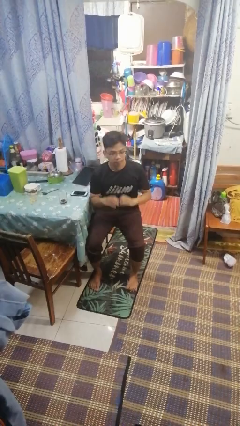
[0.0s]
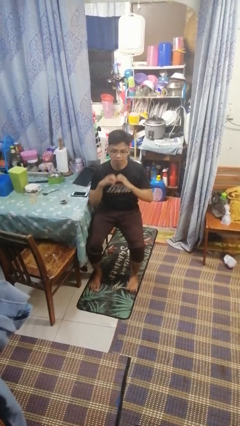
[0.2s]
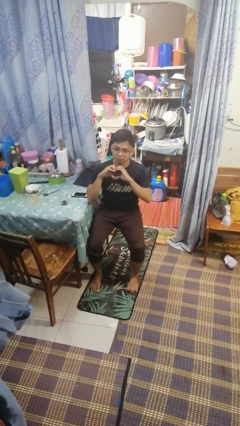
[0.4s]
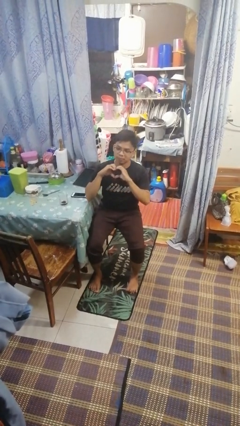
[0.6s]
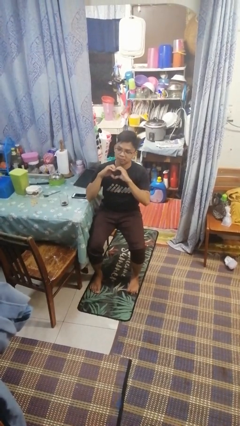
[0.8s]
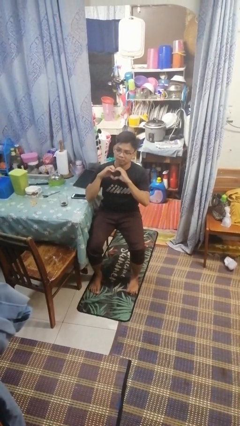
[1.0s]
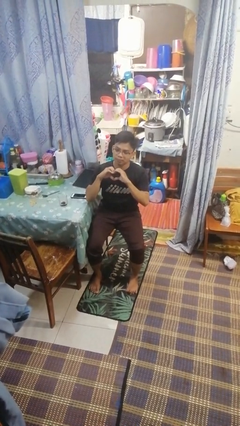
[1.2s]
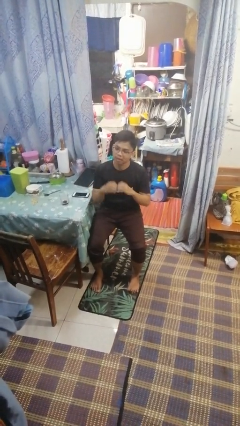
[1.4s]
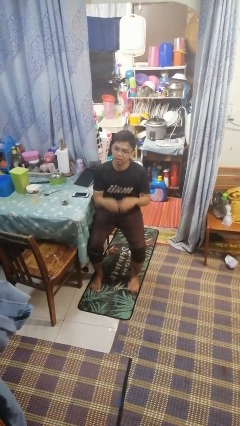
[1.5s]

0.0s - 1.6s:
person gestures heart

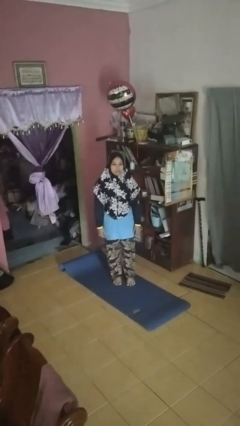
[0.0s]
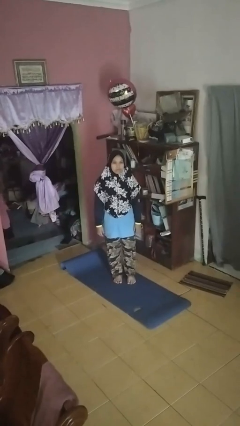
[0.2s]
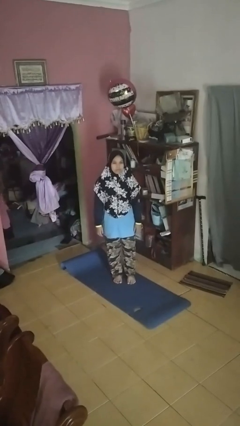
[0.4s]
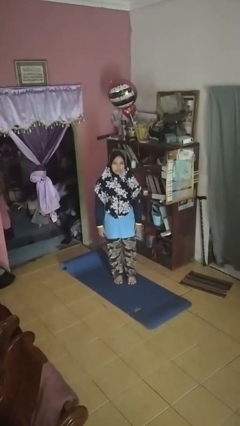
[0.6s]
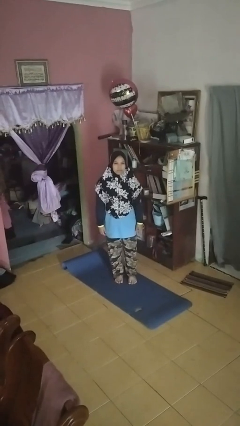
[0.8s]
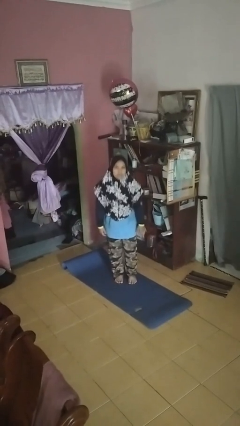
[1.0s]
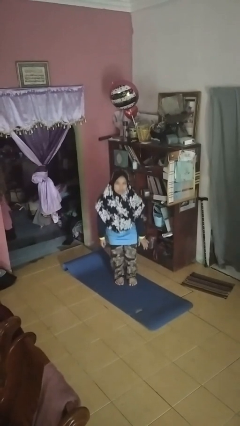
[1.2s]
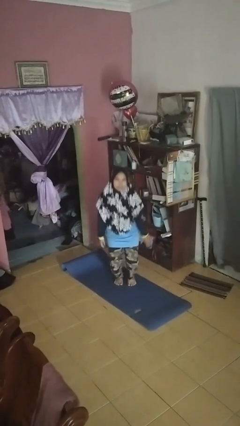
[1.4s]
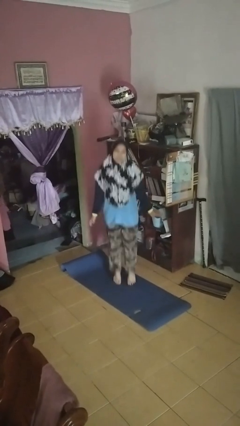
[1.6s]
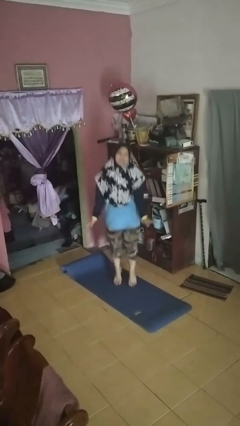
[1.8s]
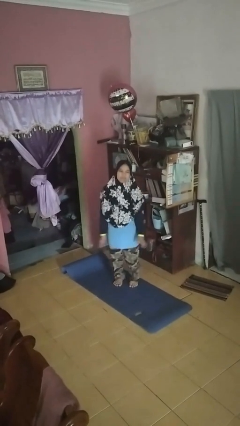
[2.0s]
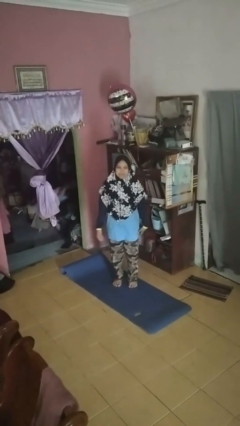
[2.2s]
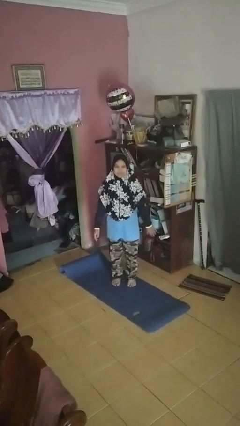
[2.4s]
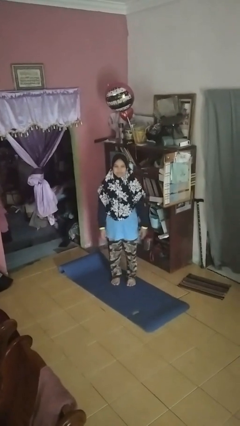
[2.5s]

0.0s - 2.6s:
person jumps

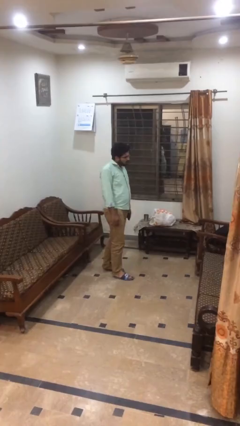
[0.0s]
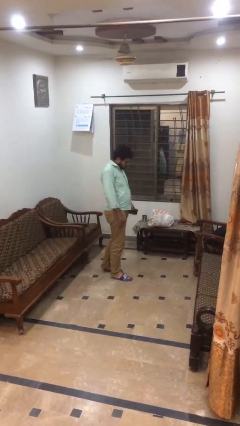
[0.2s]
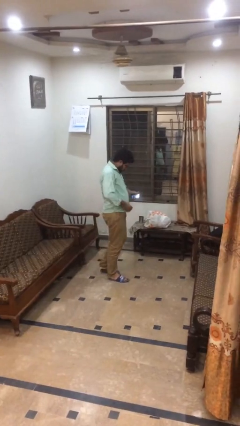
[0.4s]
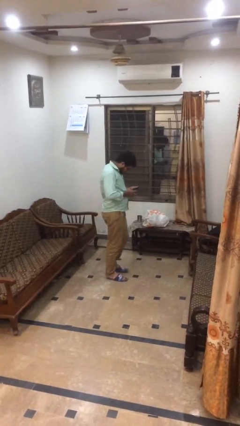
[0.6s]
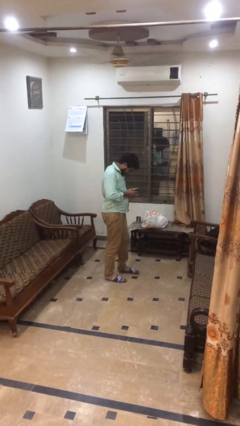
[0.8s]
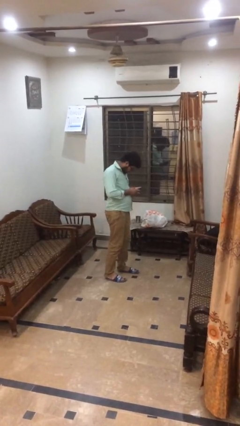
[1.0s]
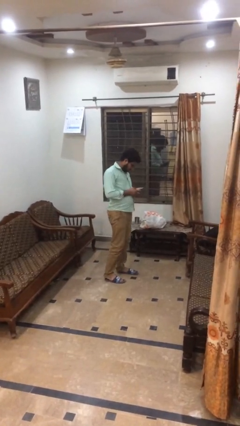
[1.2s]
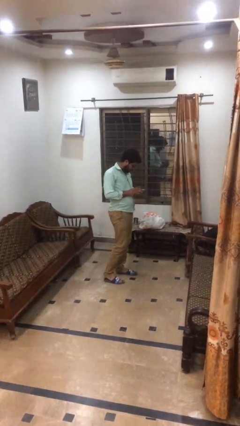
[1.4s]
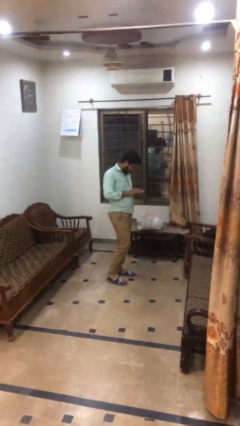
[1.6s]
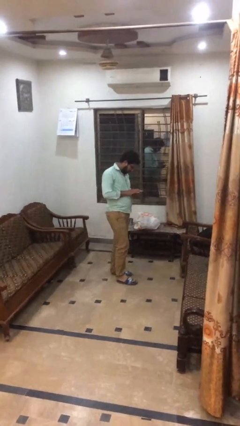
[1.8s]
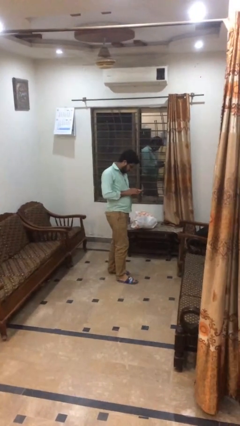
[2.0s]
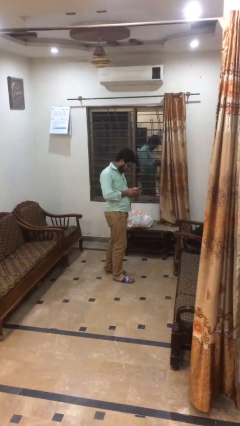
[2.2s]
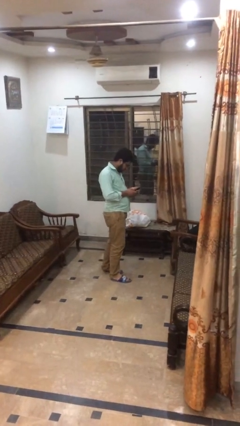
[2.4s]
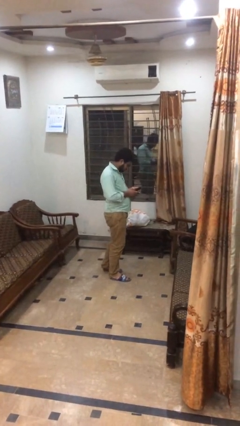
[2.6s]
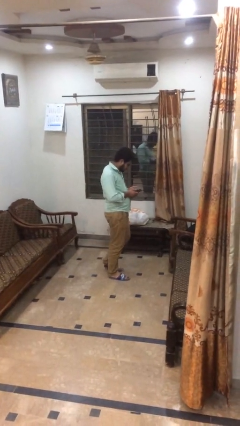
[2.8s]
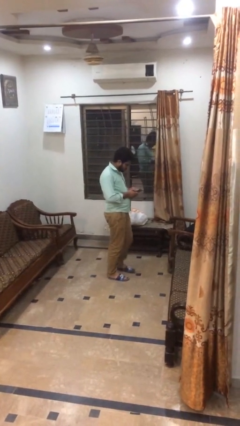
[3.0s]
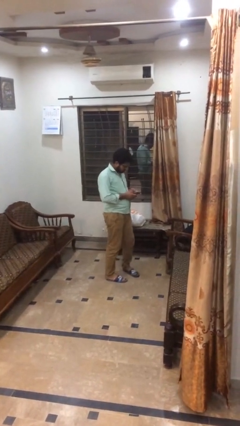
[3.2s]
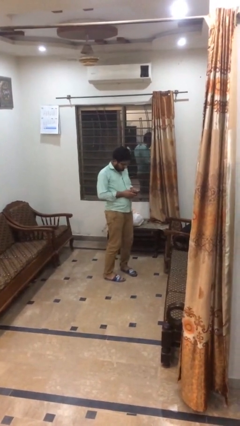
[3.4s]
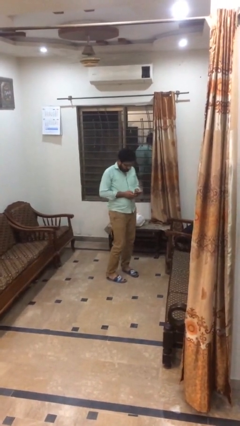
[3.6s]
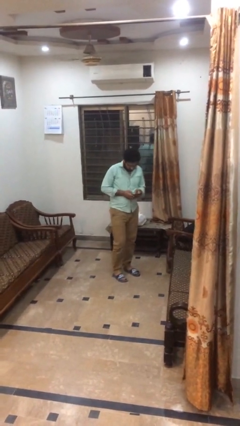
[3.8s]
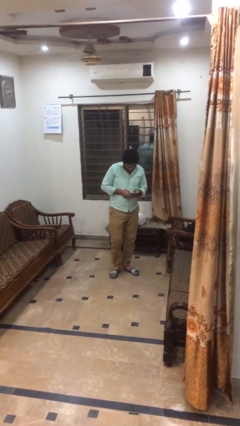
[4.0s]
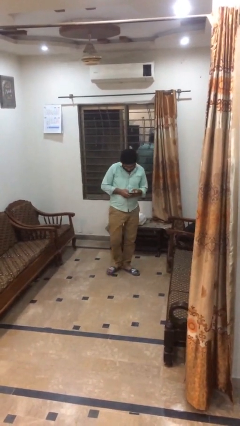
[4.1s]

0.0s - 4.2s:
person texts on phone

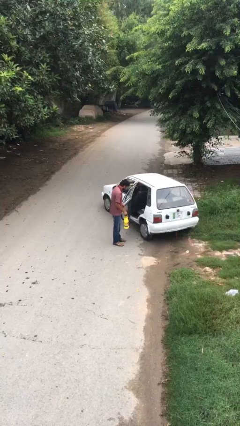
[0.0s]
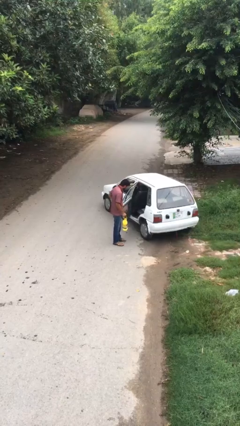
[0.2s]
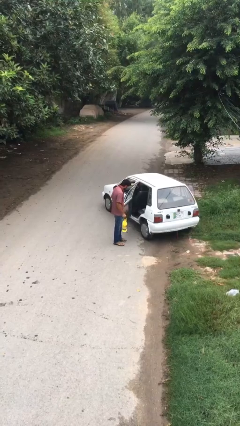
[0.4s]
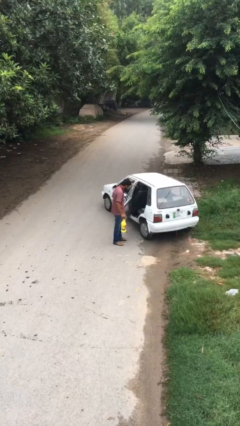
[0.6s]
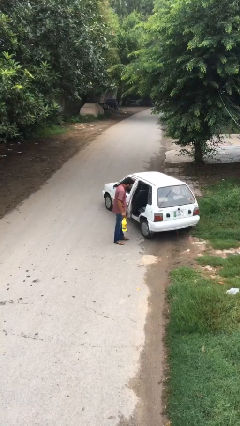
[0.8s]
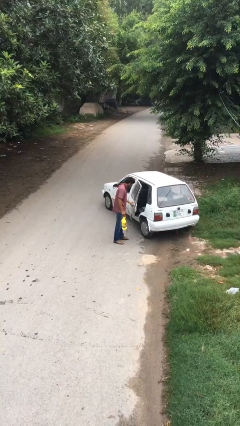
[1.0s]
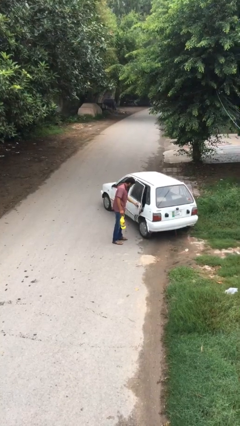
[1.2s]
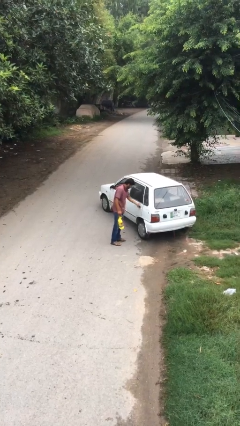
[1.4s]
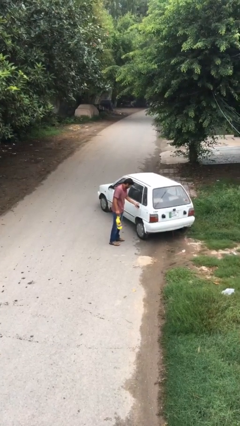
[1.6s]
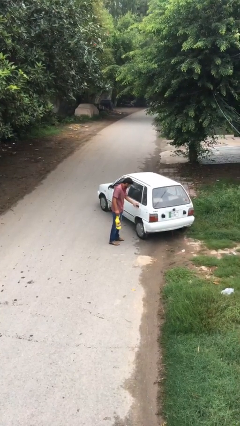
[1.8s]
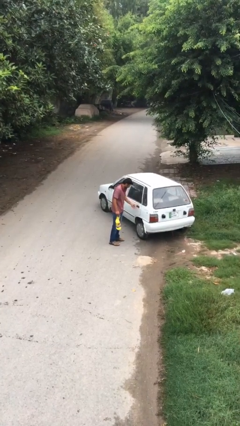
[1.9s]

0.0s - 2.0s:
person closes car door

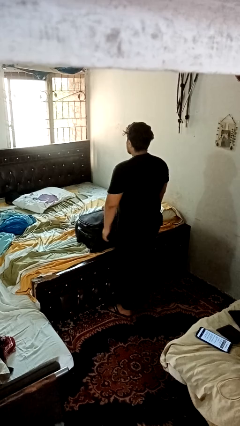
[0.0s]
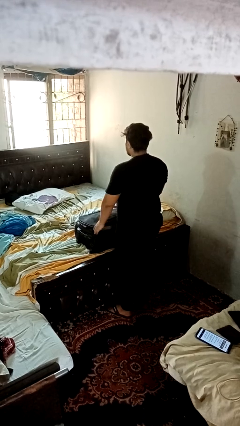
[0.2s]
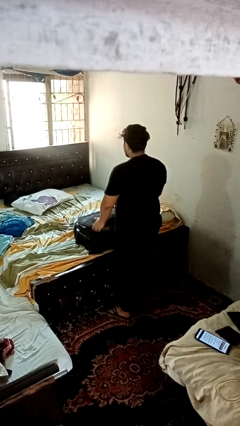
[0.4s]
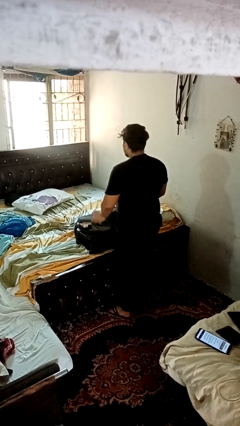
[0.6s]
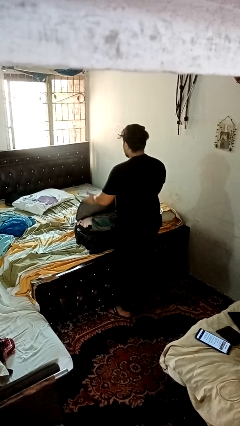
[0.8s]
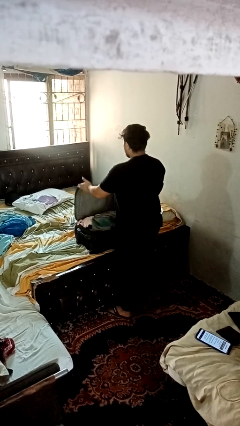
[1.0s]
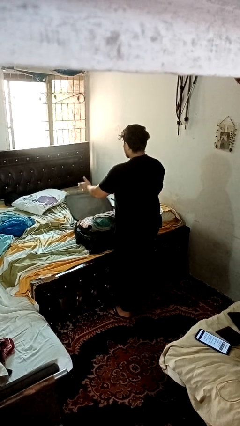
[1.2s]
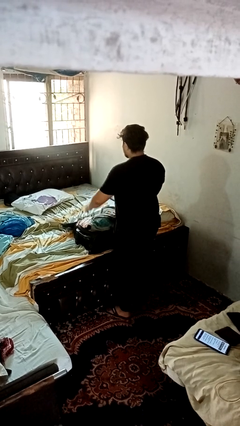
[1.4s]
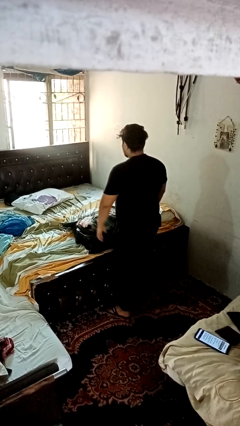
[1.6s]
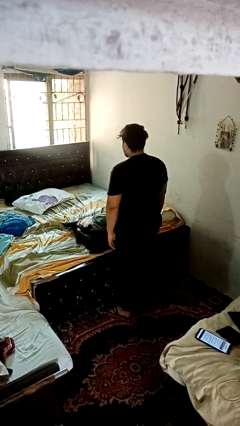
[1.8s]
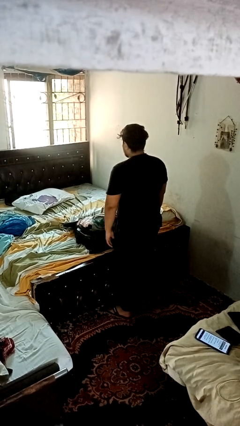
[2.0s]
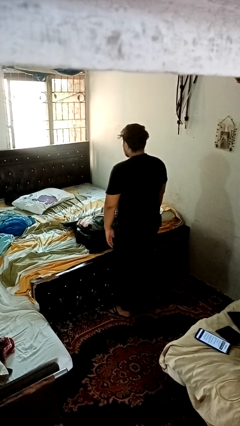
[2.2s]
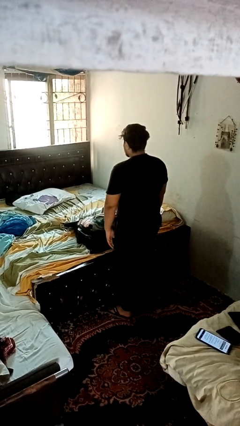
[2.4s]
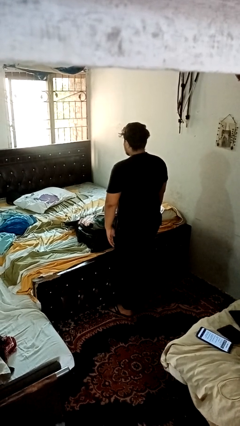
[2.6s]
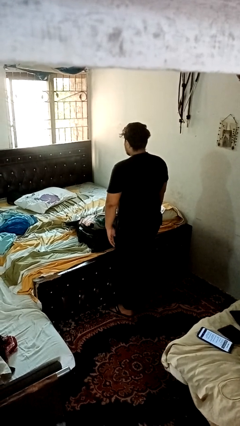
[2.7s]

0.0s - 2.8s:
person opens suitcase

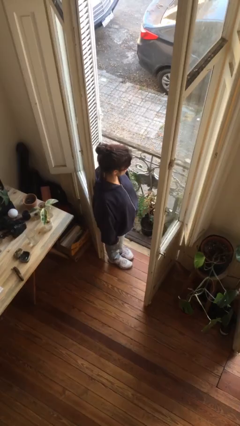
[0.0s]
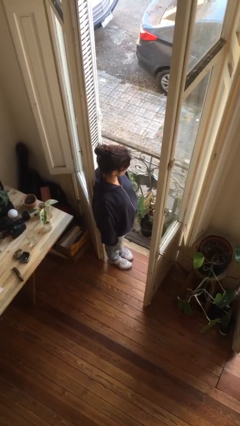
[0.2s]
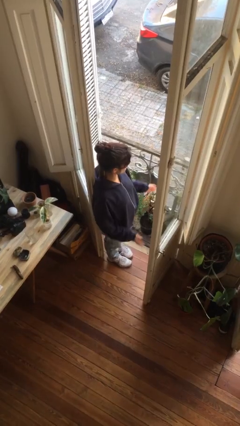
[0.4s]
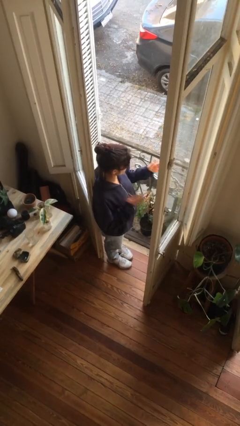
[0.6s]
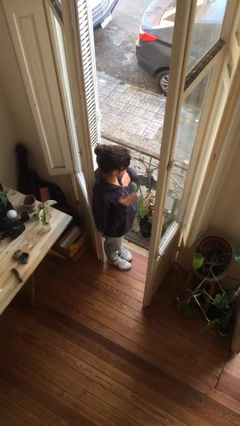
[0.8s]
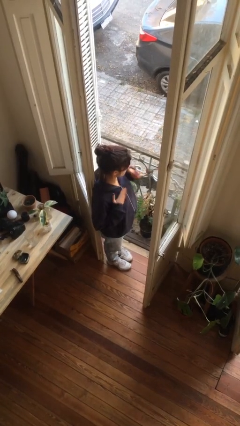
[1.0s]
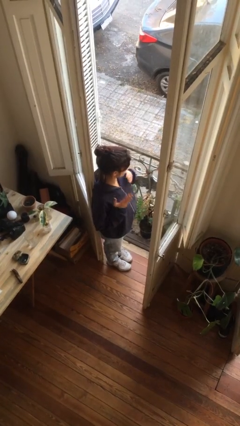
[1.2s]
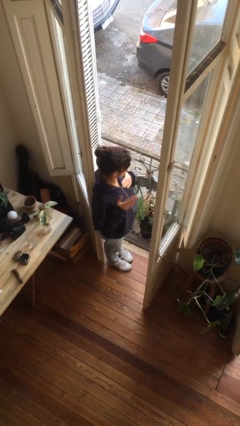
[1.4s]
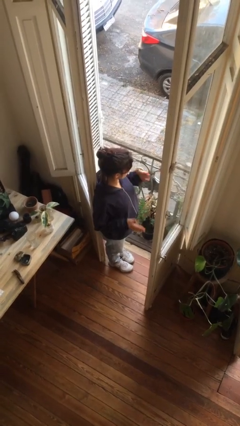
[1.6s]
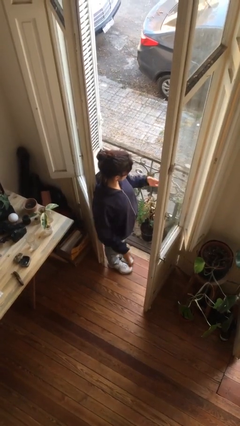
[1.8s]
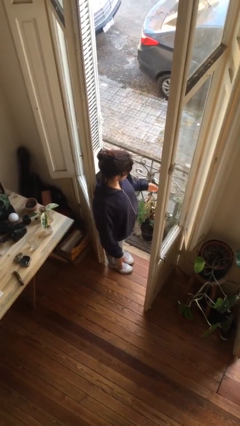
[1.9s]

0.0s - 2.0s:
person drums on chest

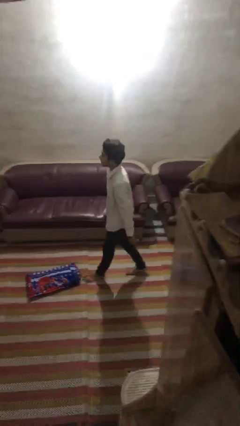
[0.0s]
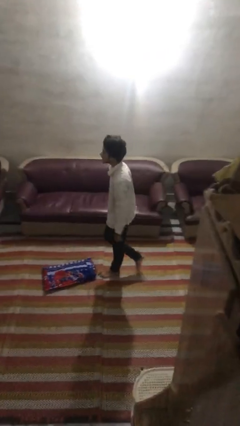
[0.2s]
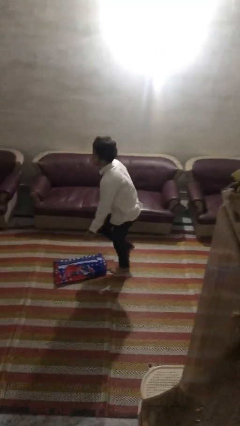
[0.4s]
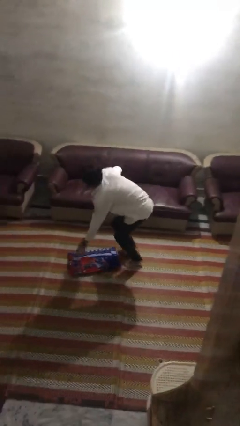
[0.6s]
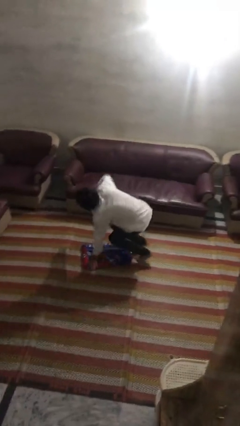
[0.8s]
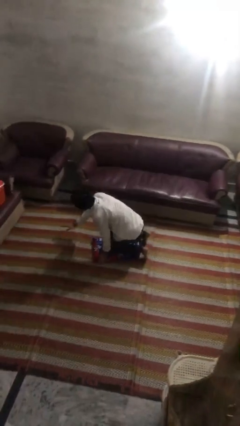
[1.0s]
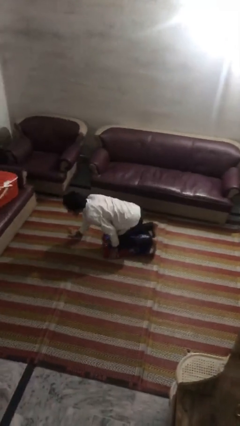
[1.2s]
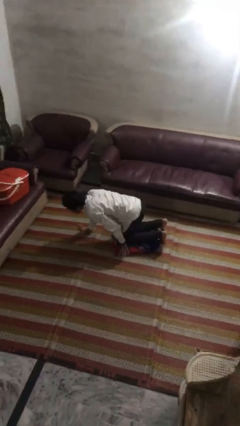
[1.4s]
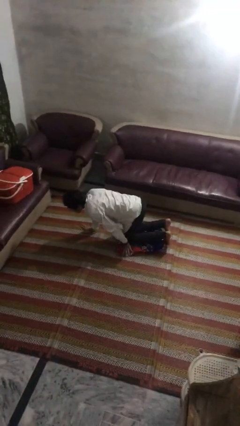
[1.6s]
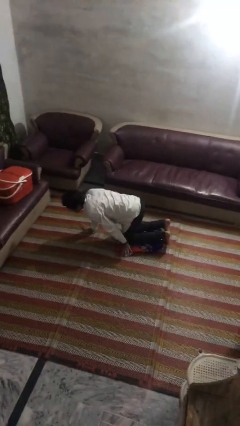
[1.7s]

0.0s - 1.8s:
person trips on object on floor

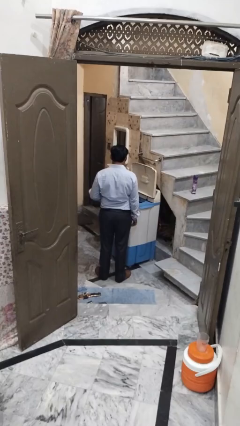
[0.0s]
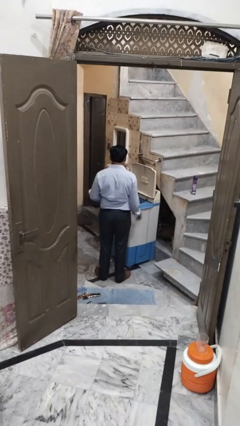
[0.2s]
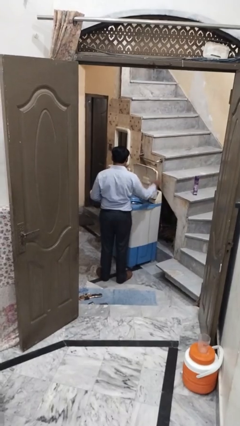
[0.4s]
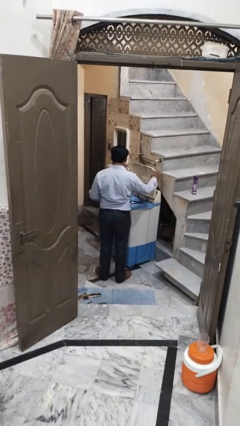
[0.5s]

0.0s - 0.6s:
person closes clothes washer
